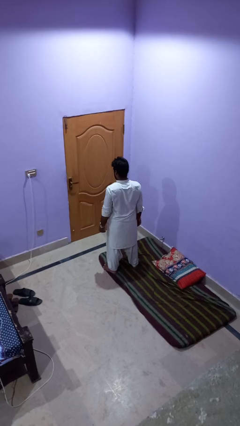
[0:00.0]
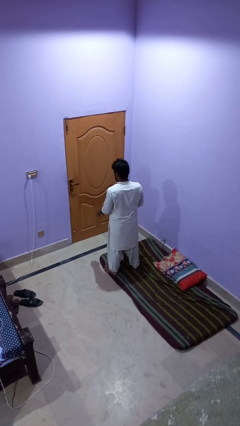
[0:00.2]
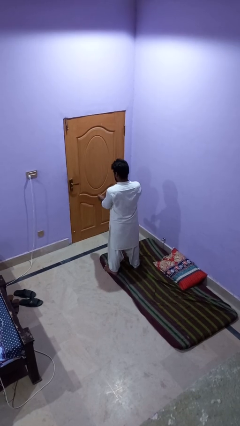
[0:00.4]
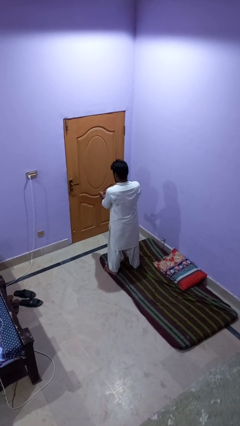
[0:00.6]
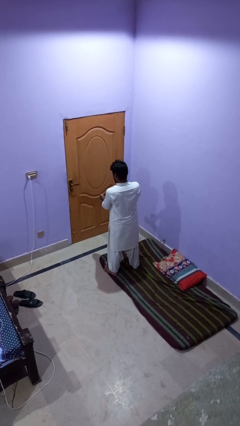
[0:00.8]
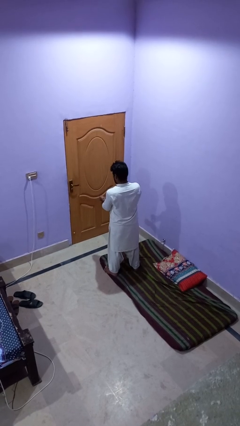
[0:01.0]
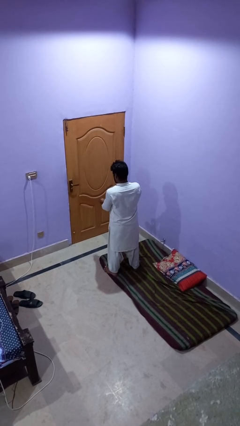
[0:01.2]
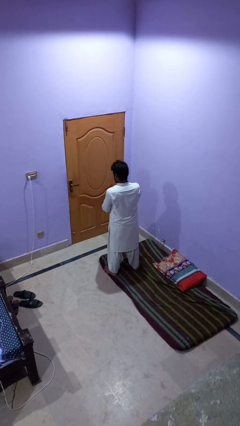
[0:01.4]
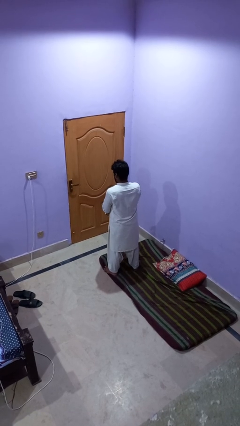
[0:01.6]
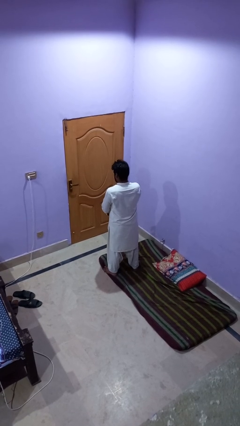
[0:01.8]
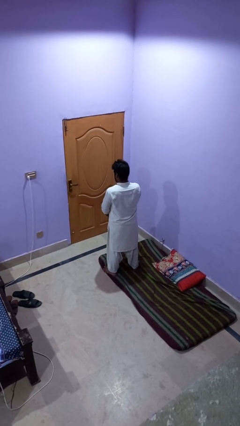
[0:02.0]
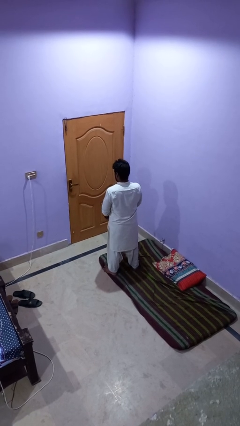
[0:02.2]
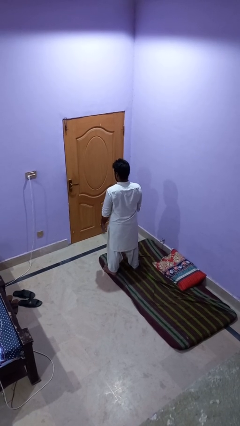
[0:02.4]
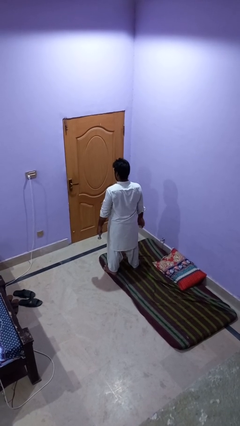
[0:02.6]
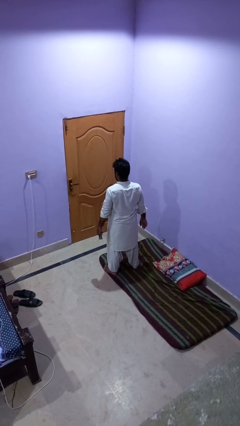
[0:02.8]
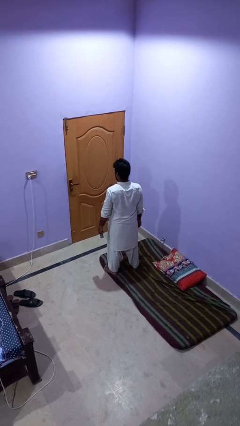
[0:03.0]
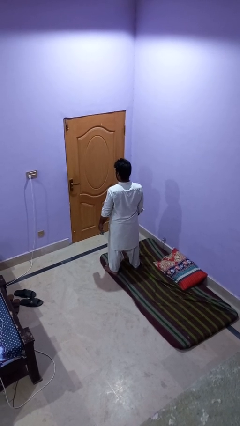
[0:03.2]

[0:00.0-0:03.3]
person takes off wristwatch

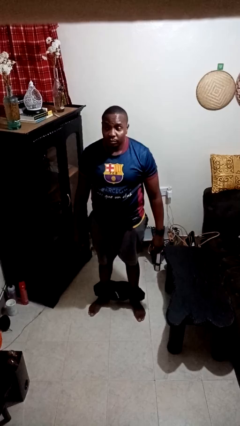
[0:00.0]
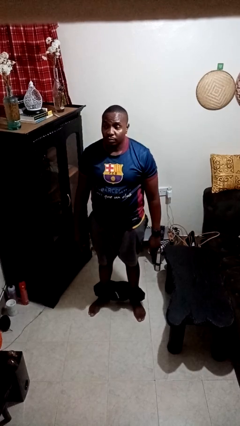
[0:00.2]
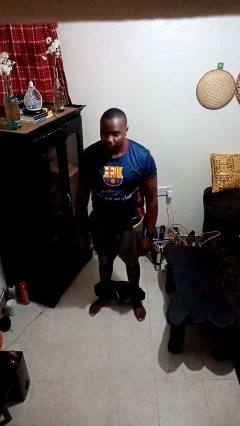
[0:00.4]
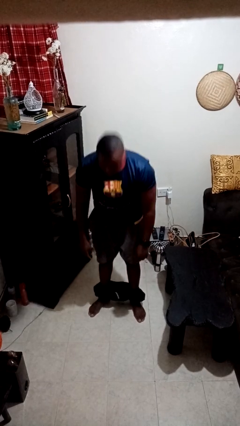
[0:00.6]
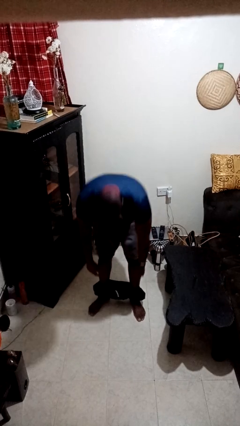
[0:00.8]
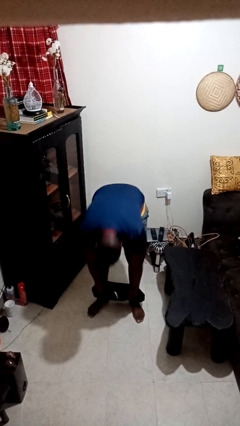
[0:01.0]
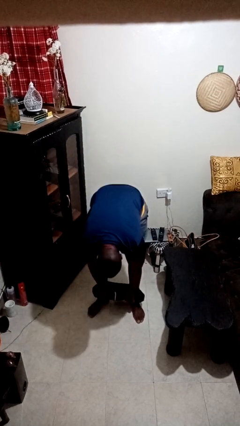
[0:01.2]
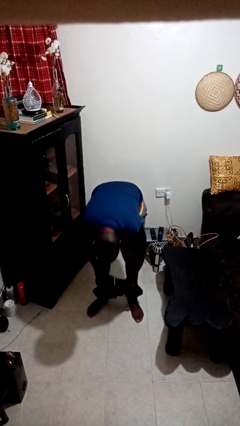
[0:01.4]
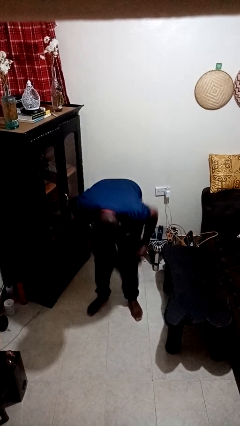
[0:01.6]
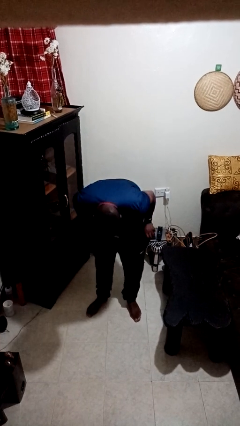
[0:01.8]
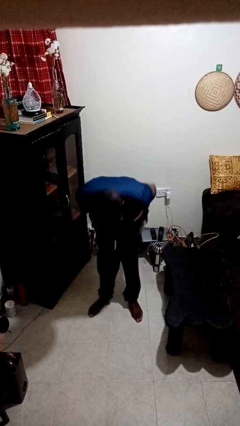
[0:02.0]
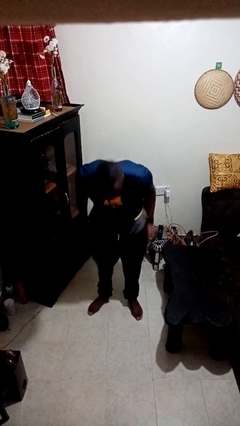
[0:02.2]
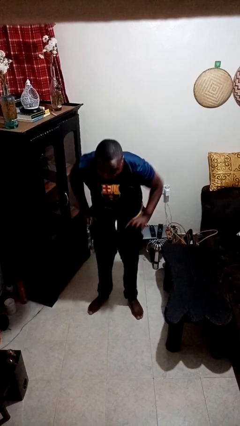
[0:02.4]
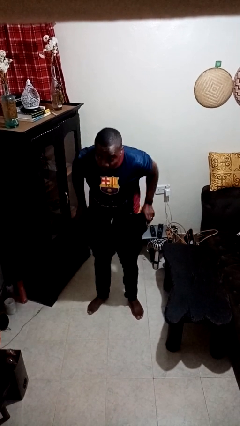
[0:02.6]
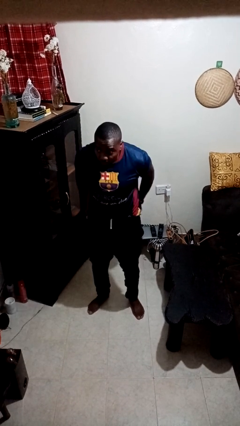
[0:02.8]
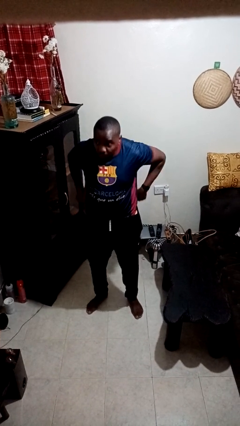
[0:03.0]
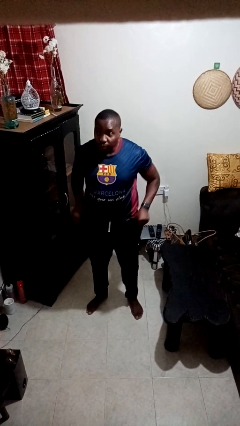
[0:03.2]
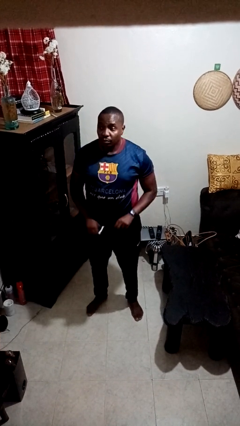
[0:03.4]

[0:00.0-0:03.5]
person puts on pants

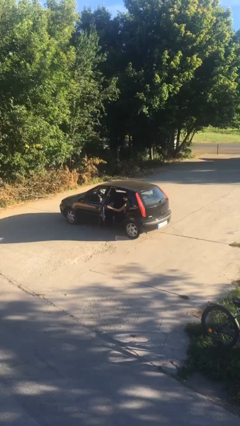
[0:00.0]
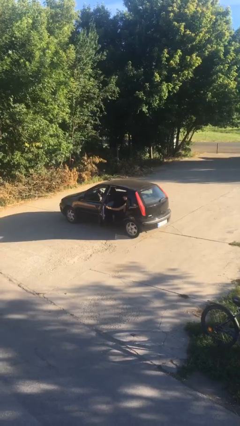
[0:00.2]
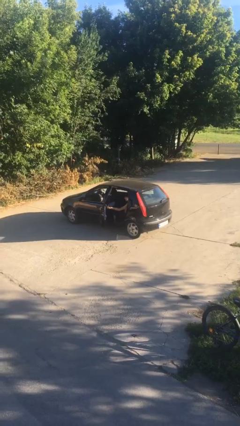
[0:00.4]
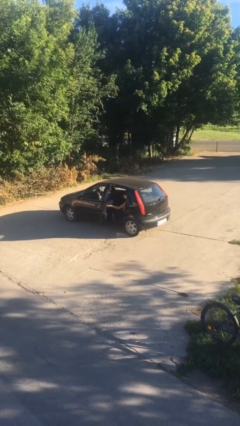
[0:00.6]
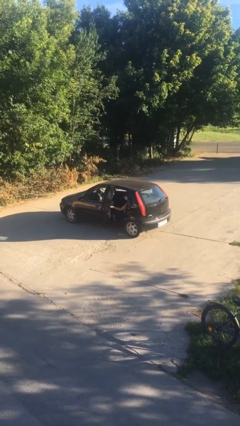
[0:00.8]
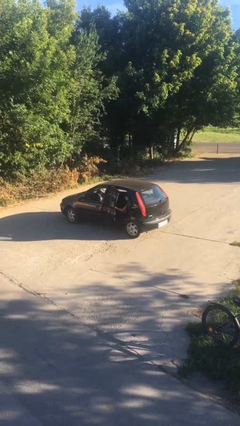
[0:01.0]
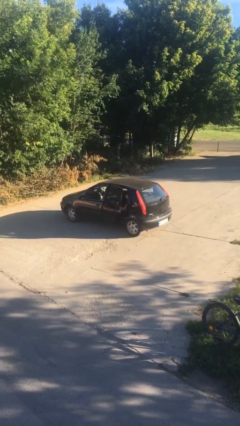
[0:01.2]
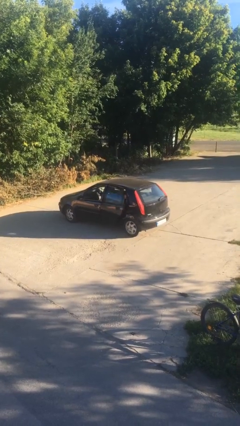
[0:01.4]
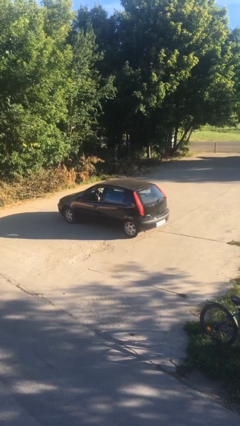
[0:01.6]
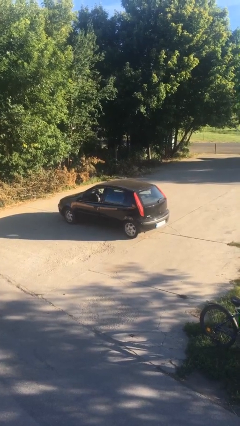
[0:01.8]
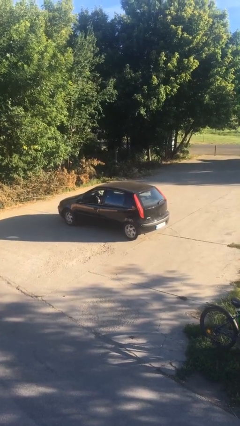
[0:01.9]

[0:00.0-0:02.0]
person closes car door

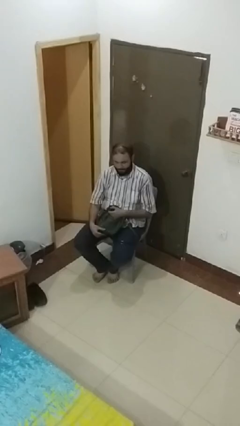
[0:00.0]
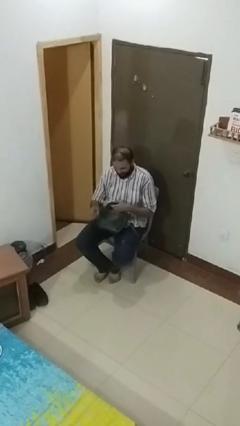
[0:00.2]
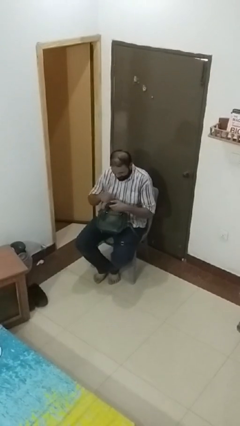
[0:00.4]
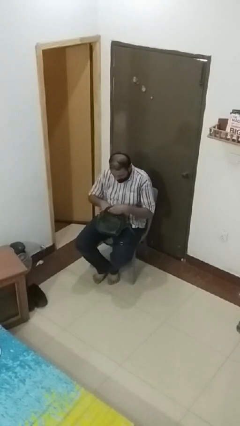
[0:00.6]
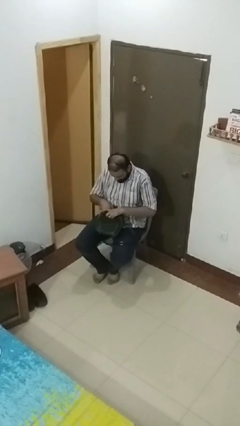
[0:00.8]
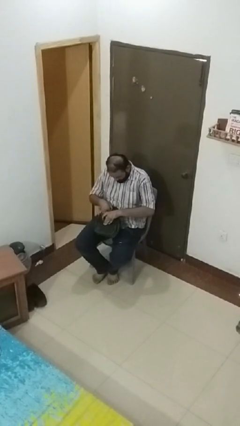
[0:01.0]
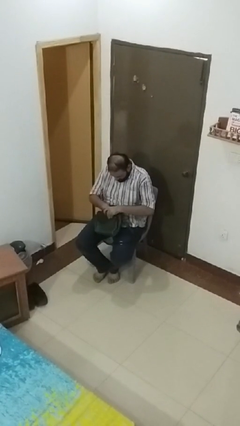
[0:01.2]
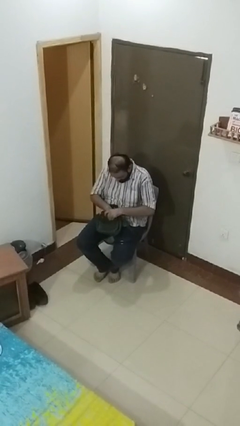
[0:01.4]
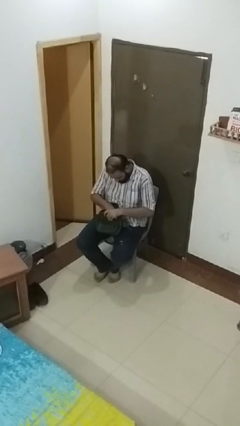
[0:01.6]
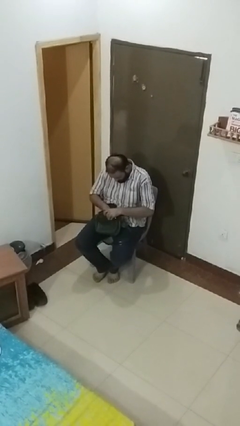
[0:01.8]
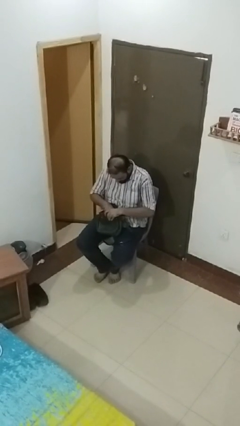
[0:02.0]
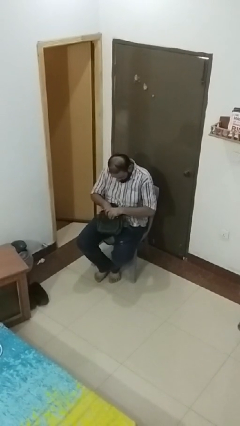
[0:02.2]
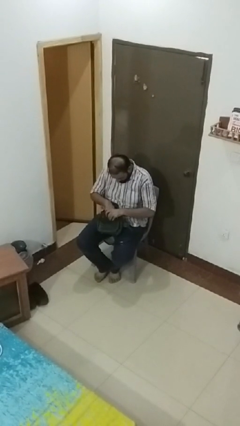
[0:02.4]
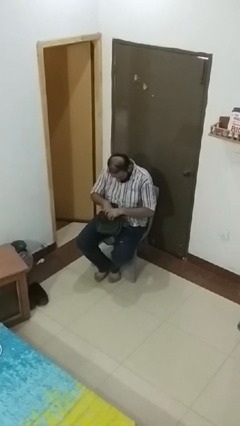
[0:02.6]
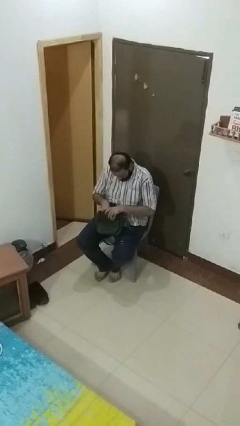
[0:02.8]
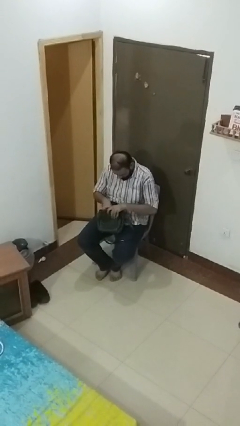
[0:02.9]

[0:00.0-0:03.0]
person searches in purse

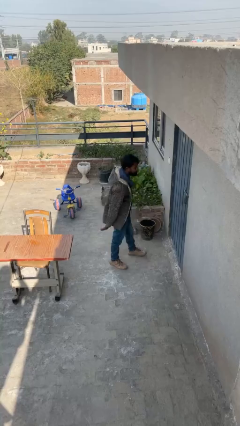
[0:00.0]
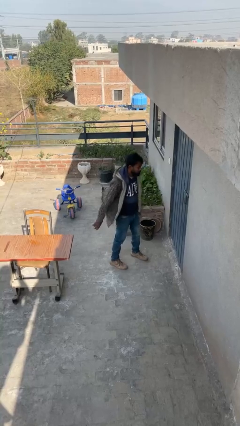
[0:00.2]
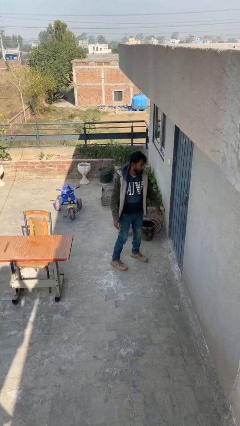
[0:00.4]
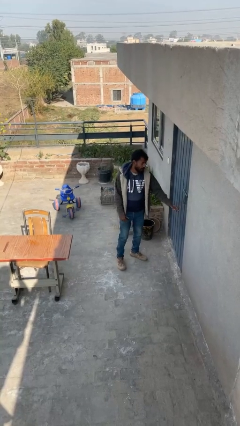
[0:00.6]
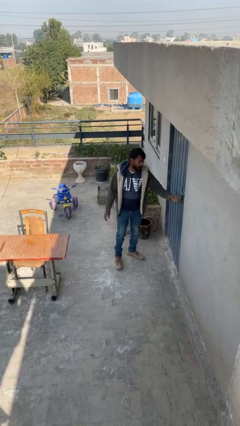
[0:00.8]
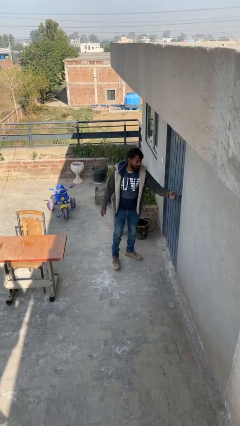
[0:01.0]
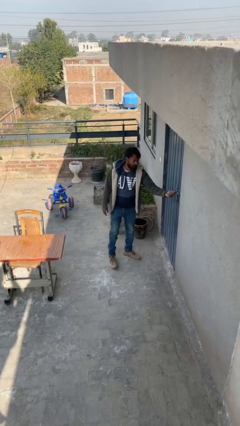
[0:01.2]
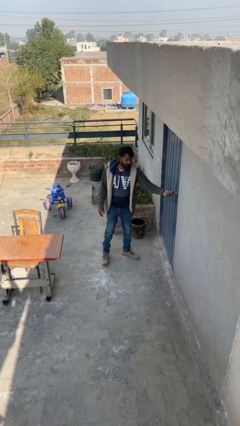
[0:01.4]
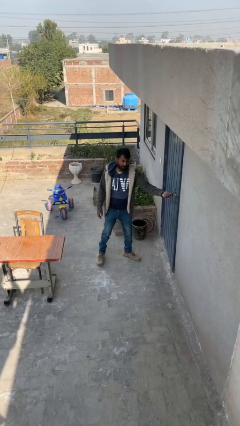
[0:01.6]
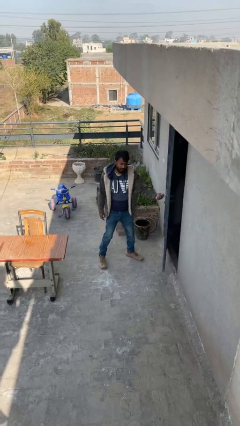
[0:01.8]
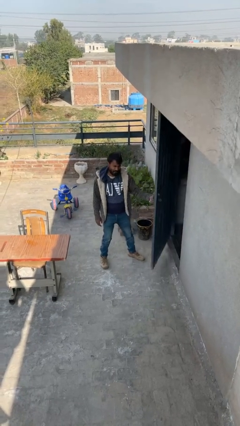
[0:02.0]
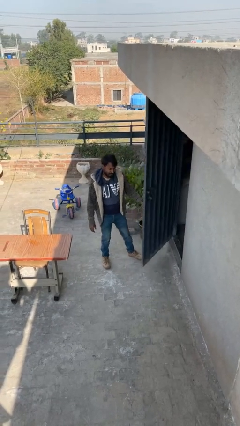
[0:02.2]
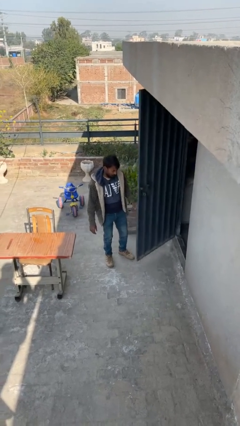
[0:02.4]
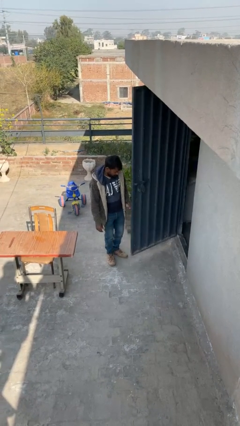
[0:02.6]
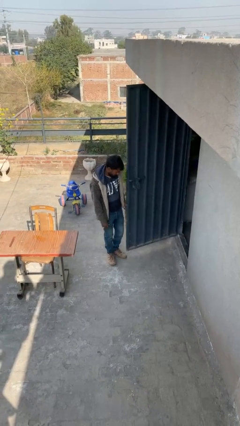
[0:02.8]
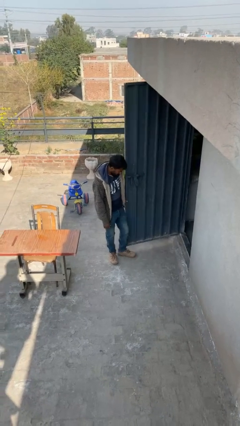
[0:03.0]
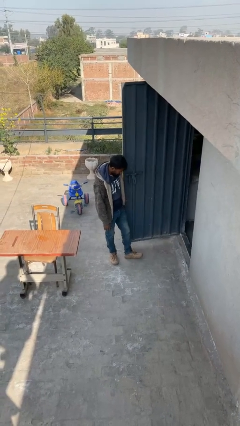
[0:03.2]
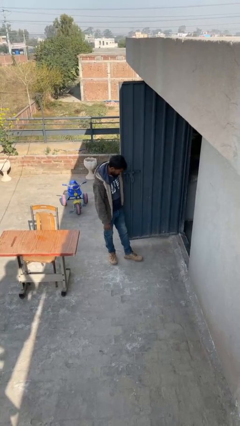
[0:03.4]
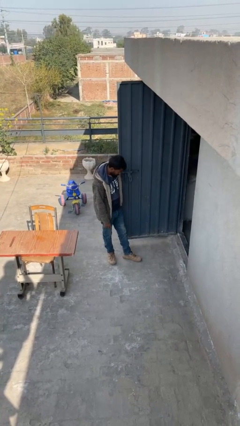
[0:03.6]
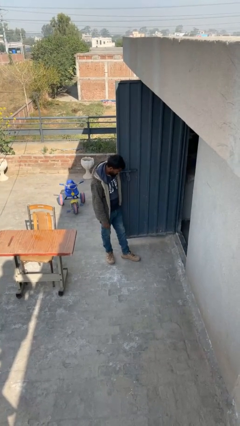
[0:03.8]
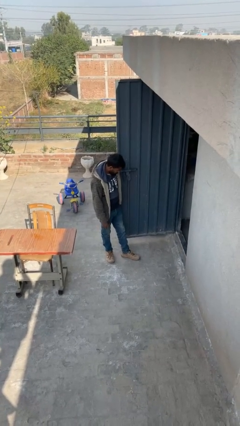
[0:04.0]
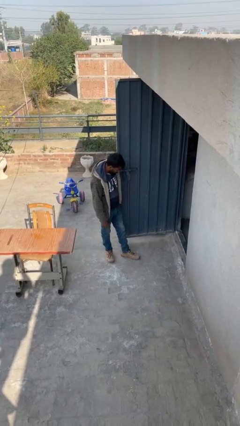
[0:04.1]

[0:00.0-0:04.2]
person opens facility door

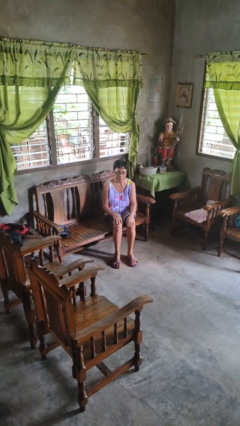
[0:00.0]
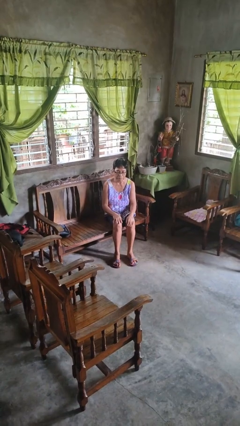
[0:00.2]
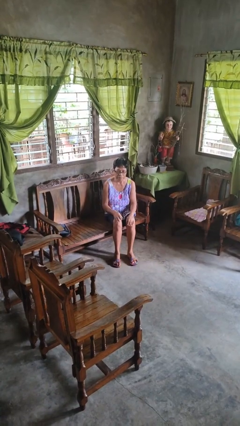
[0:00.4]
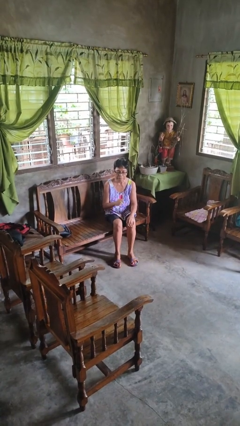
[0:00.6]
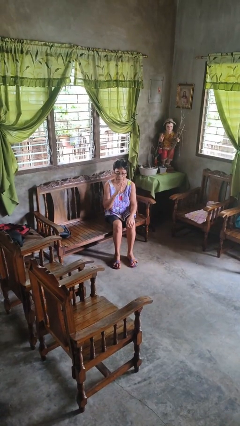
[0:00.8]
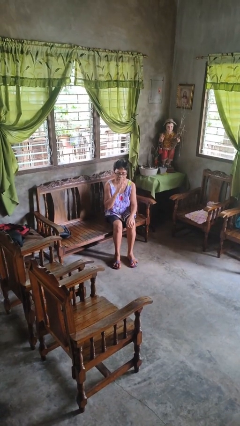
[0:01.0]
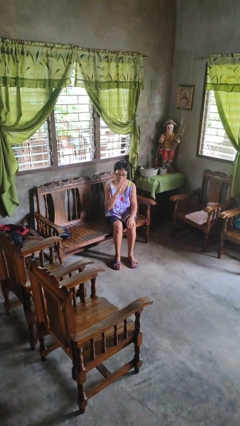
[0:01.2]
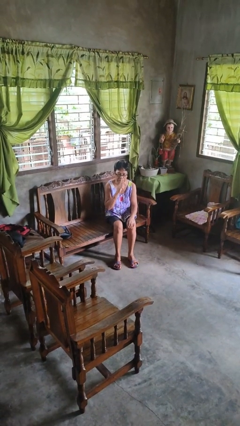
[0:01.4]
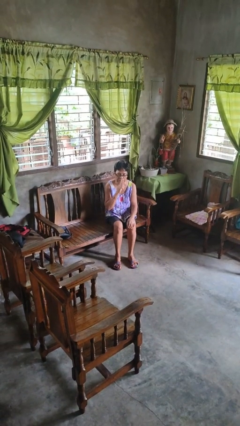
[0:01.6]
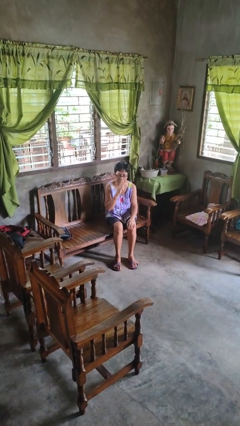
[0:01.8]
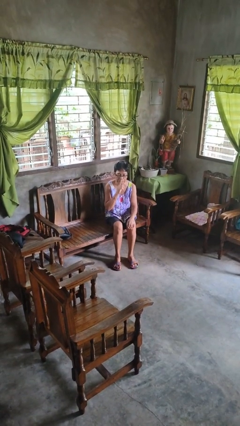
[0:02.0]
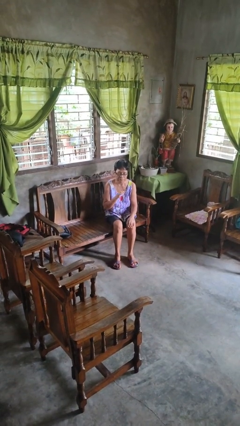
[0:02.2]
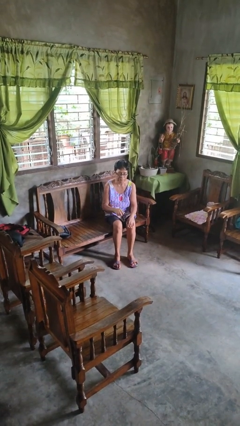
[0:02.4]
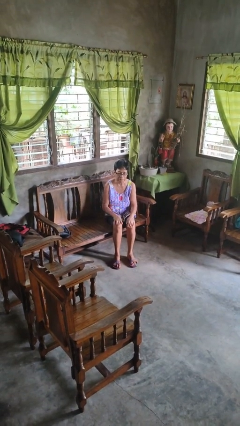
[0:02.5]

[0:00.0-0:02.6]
person gestures be quiet
